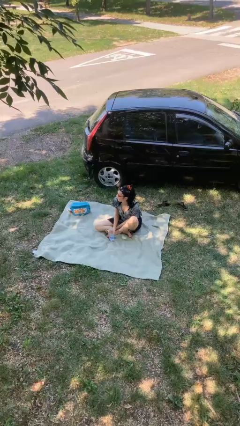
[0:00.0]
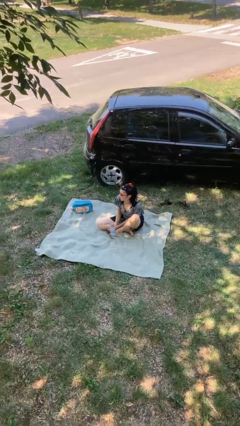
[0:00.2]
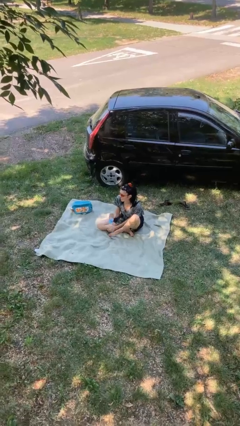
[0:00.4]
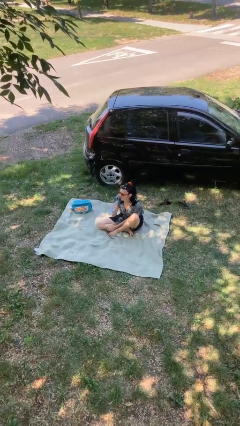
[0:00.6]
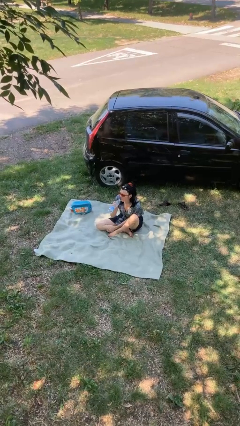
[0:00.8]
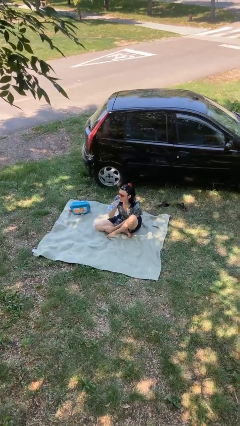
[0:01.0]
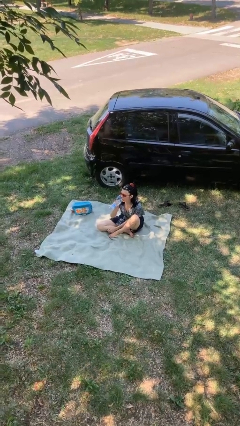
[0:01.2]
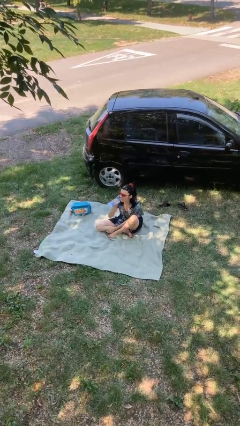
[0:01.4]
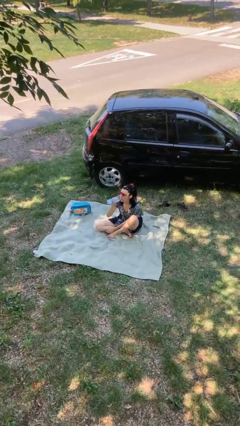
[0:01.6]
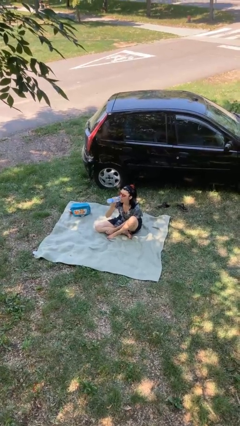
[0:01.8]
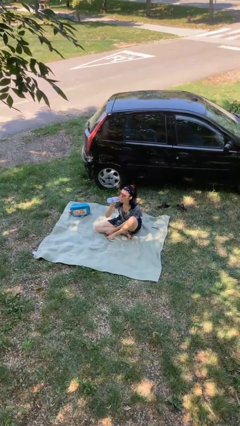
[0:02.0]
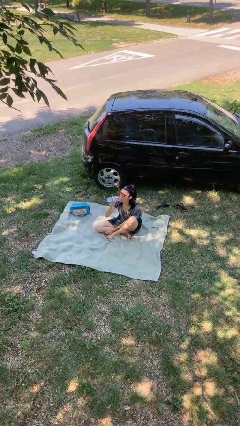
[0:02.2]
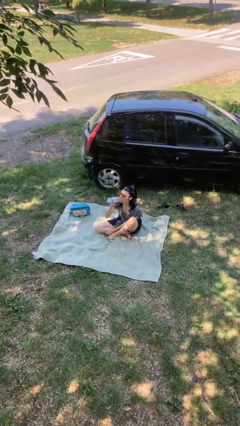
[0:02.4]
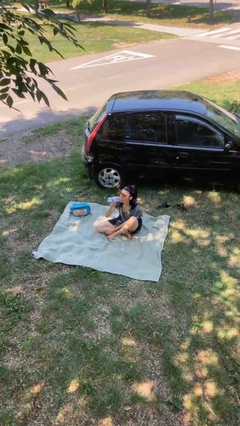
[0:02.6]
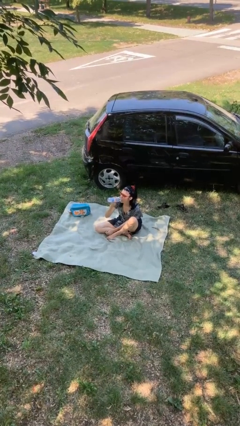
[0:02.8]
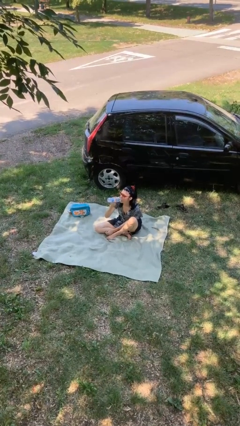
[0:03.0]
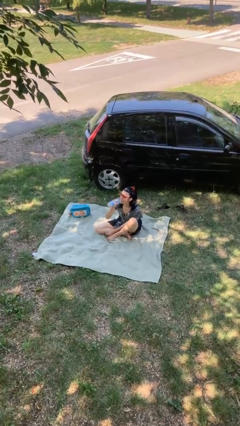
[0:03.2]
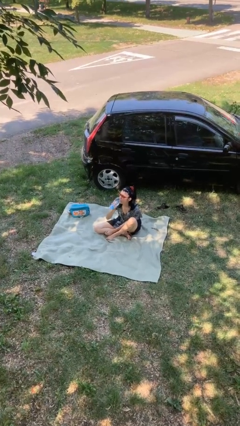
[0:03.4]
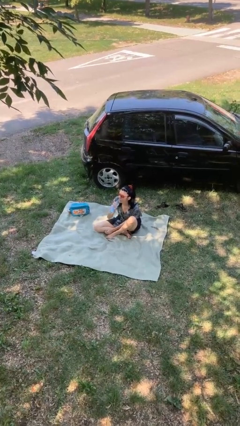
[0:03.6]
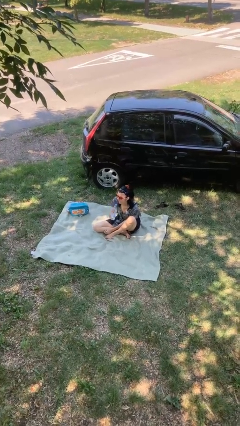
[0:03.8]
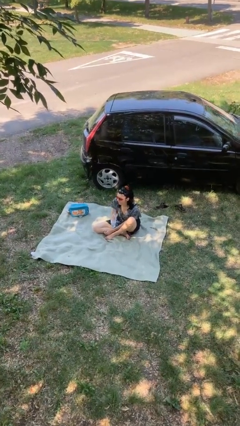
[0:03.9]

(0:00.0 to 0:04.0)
person drinks from bottle

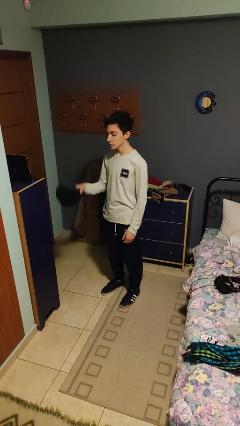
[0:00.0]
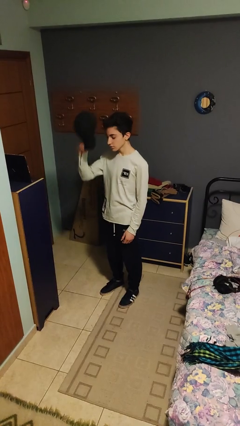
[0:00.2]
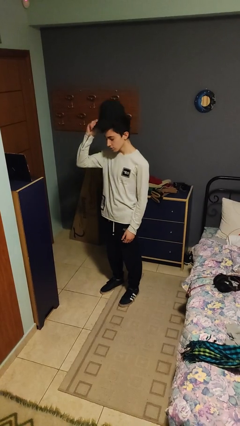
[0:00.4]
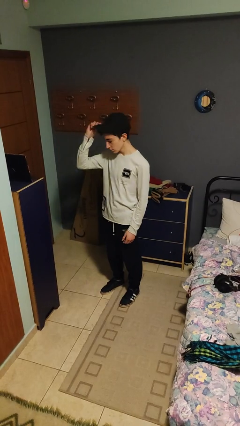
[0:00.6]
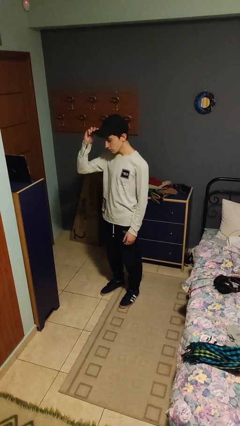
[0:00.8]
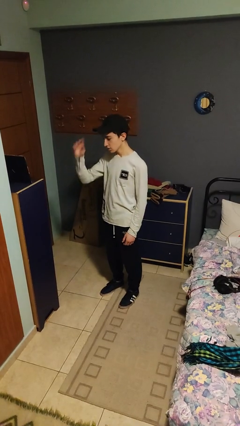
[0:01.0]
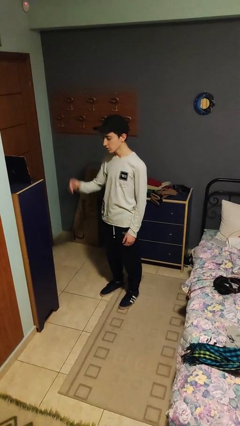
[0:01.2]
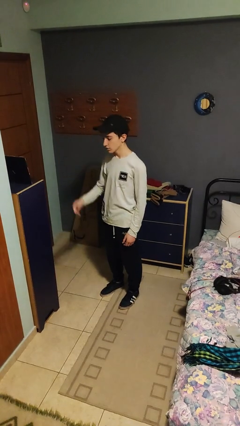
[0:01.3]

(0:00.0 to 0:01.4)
person puts on hat

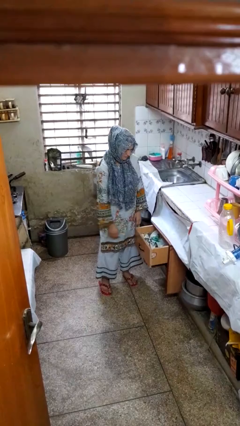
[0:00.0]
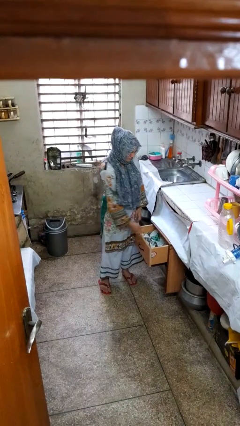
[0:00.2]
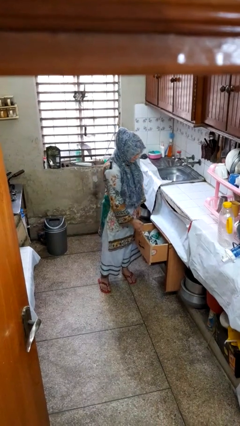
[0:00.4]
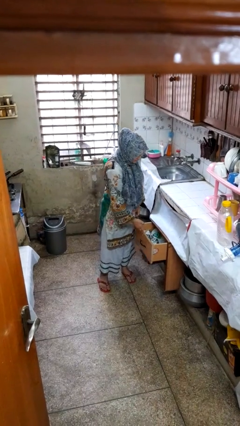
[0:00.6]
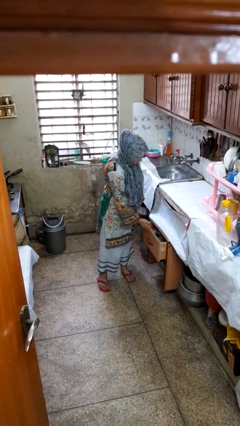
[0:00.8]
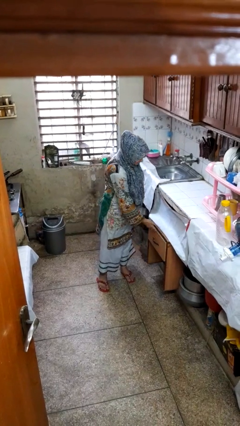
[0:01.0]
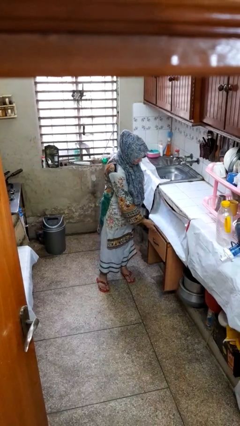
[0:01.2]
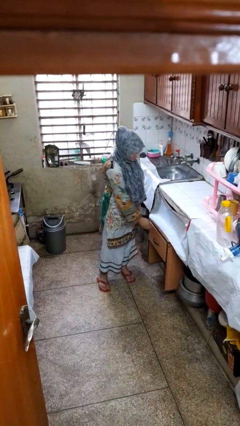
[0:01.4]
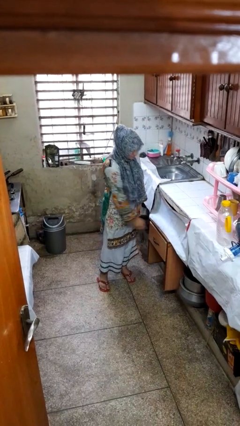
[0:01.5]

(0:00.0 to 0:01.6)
person closes kitchen drawer

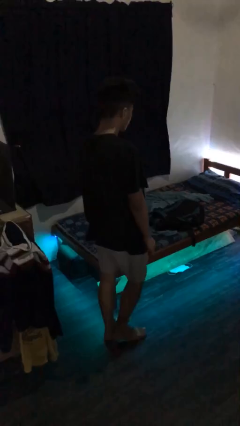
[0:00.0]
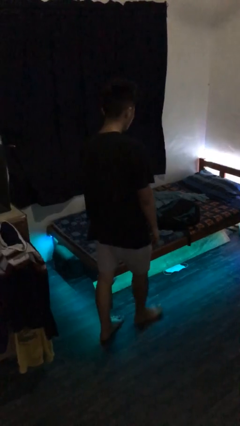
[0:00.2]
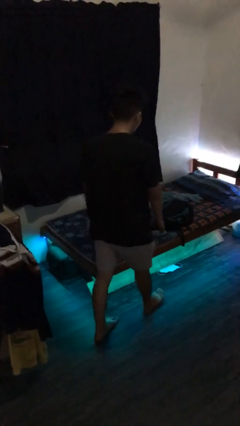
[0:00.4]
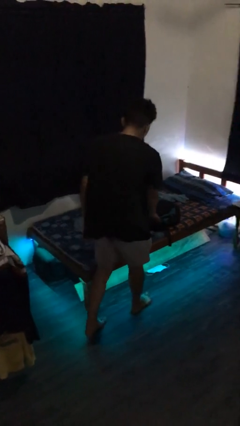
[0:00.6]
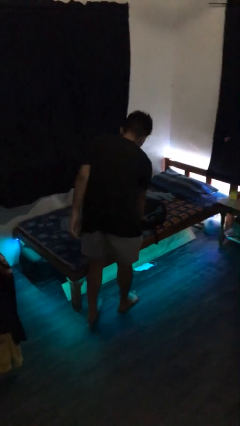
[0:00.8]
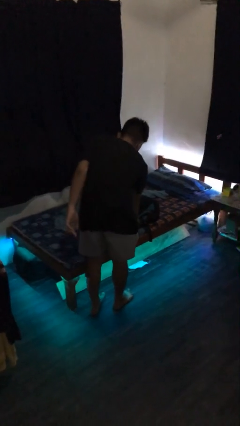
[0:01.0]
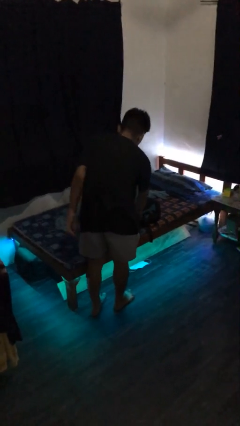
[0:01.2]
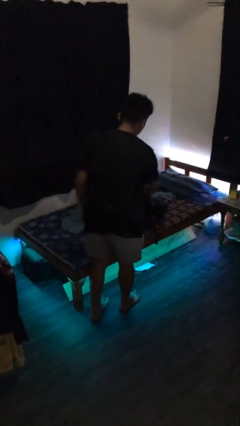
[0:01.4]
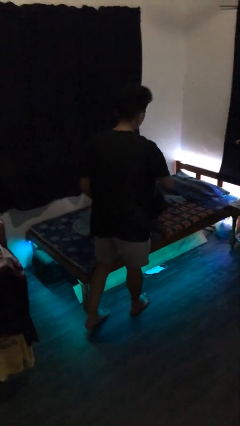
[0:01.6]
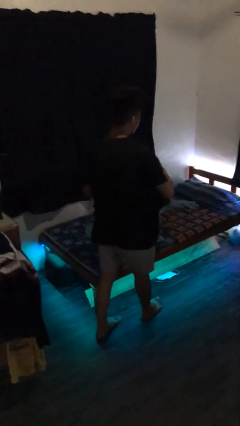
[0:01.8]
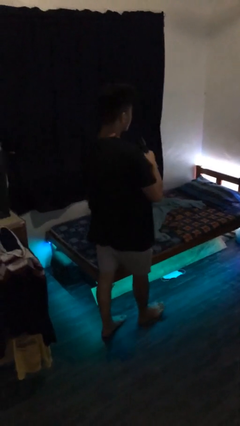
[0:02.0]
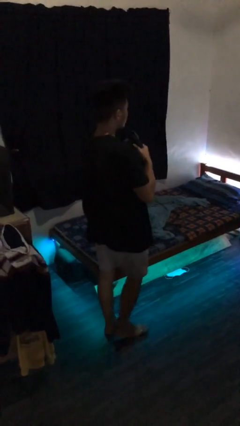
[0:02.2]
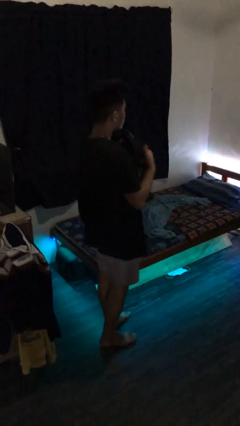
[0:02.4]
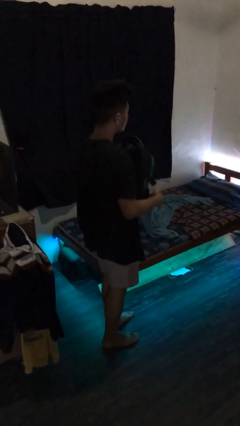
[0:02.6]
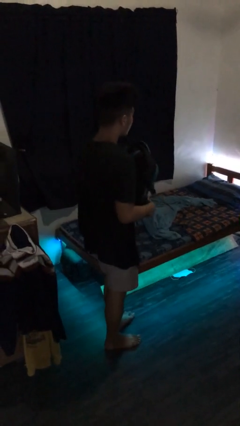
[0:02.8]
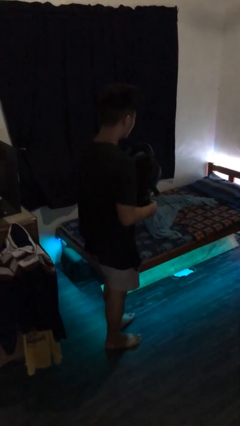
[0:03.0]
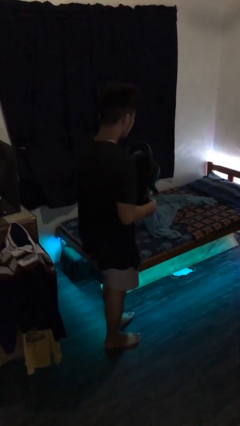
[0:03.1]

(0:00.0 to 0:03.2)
person picks up object from bed

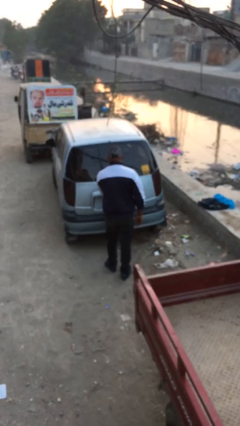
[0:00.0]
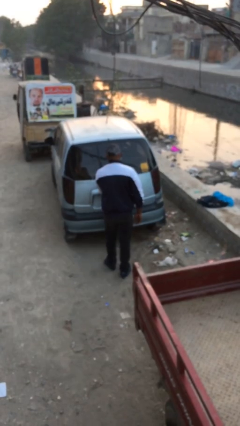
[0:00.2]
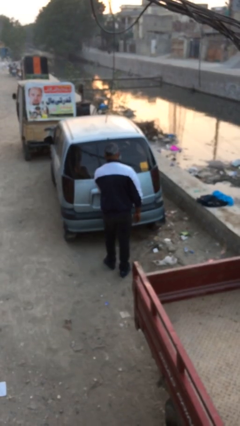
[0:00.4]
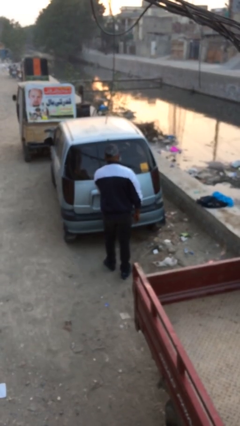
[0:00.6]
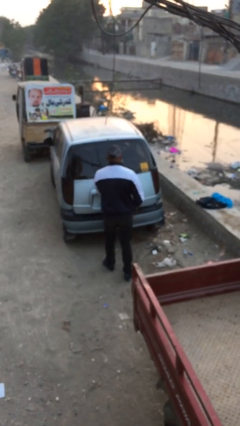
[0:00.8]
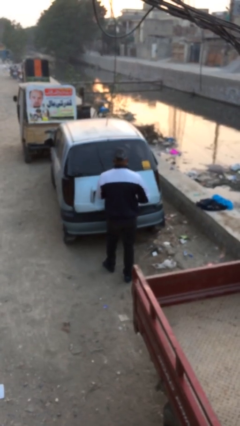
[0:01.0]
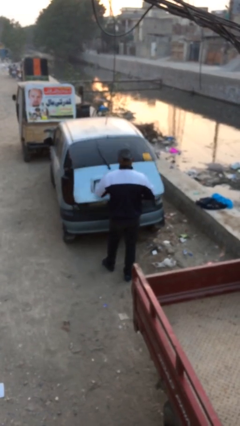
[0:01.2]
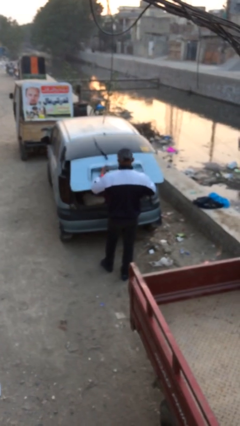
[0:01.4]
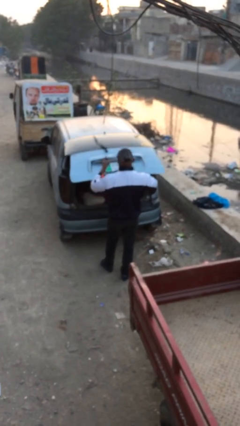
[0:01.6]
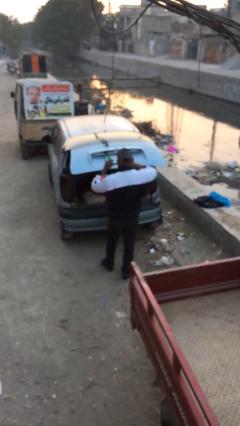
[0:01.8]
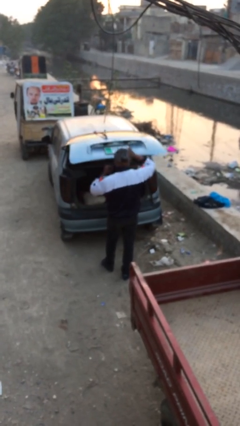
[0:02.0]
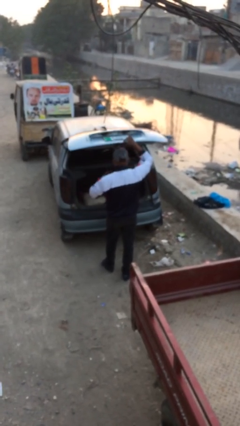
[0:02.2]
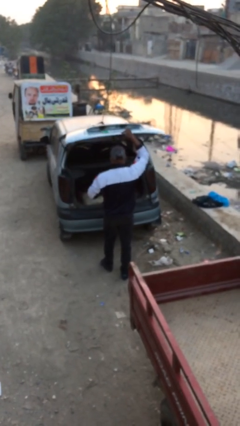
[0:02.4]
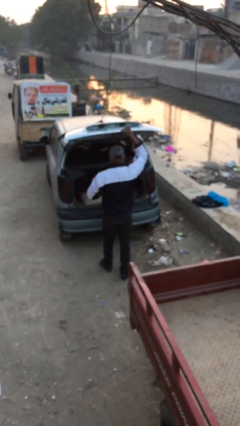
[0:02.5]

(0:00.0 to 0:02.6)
person opens car trunk

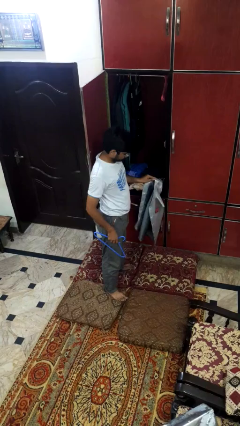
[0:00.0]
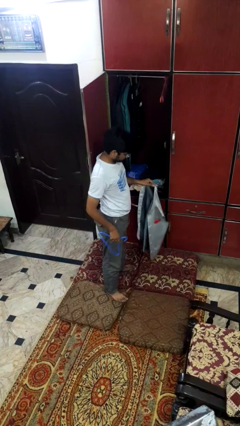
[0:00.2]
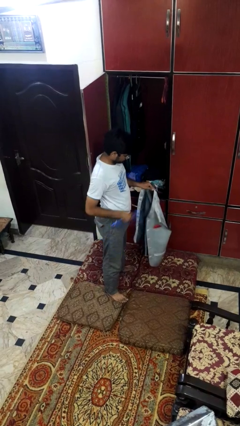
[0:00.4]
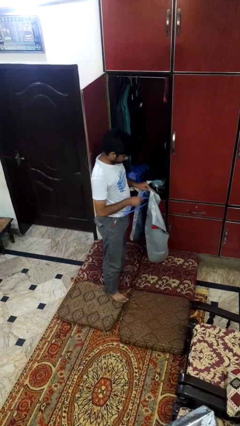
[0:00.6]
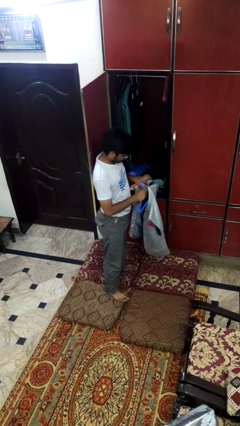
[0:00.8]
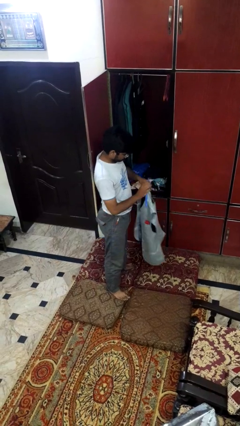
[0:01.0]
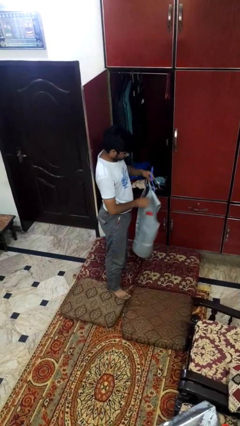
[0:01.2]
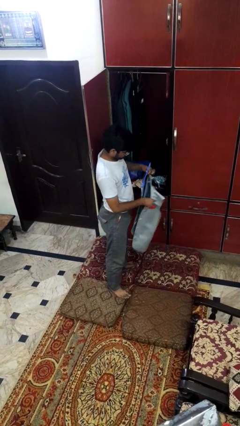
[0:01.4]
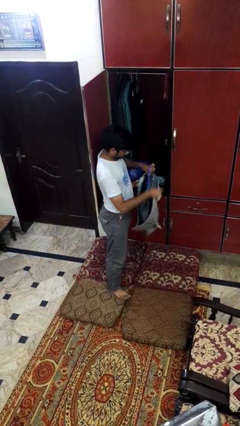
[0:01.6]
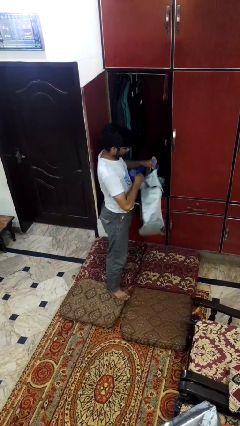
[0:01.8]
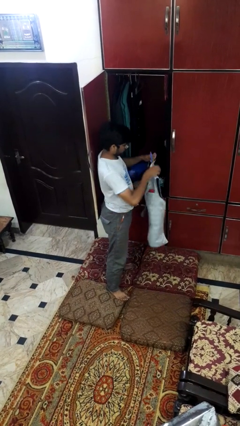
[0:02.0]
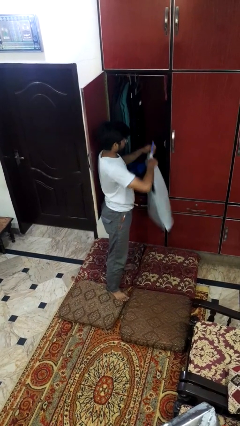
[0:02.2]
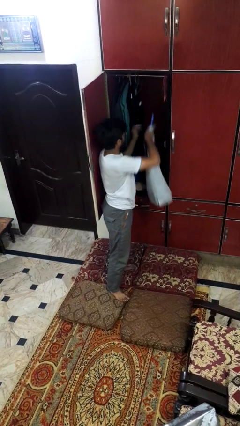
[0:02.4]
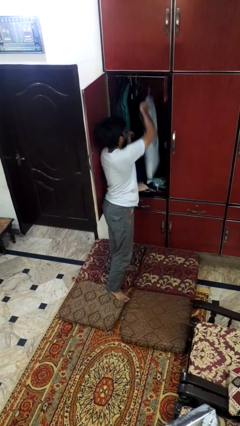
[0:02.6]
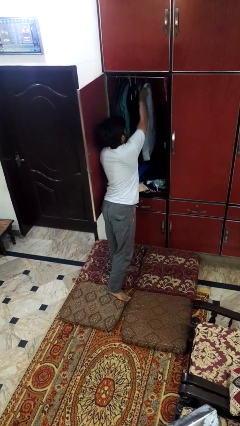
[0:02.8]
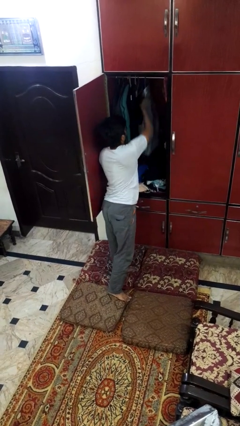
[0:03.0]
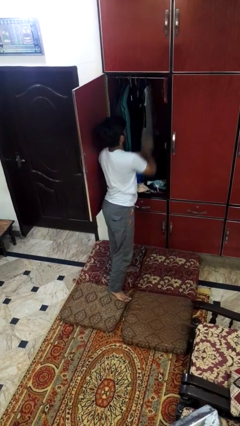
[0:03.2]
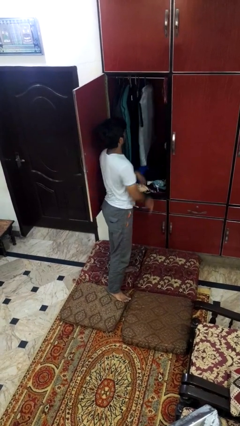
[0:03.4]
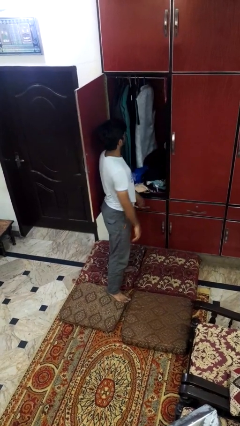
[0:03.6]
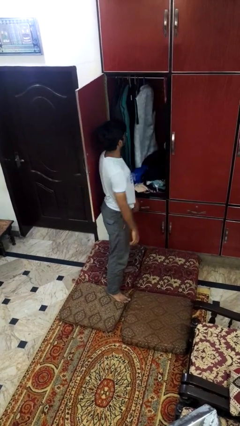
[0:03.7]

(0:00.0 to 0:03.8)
person puts clothes into closet

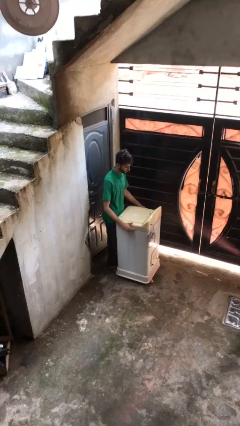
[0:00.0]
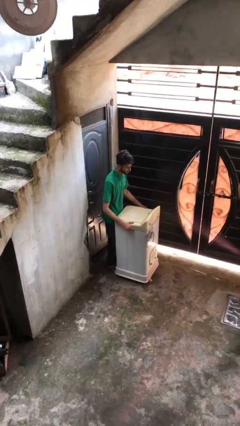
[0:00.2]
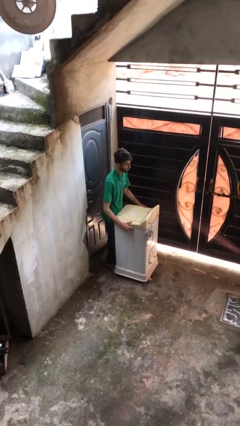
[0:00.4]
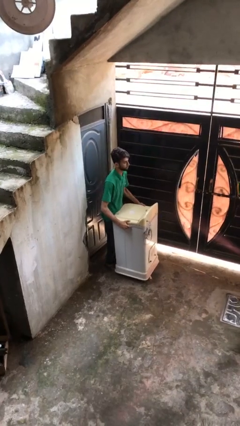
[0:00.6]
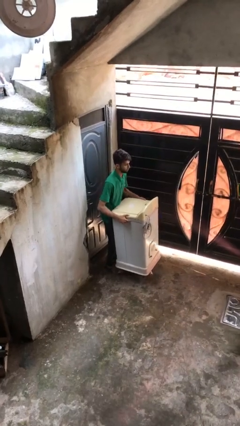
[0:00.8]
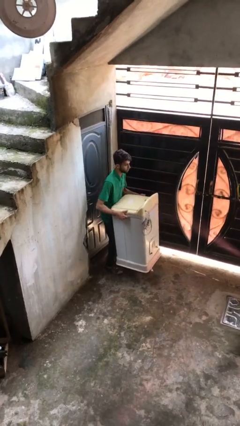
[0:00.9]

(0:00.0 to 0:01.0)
person picks up object from floor
